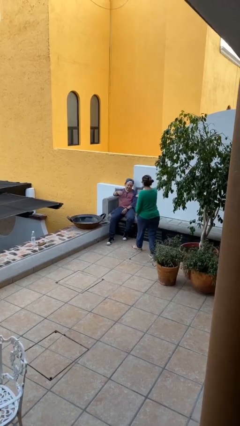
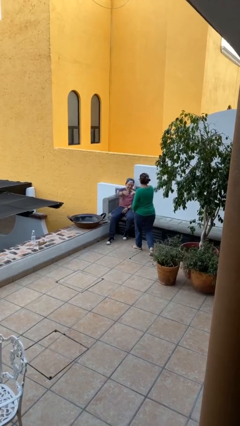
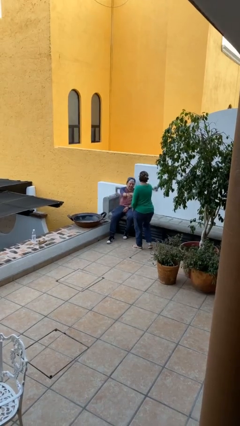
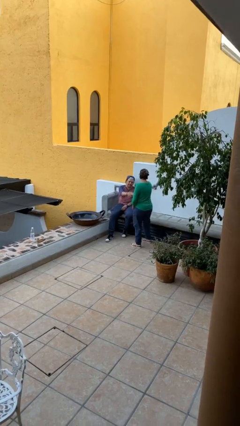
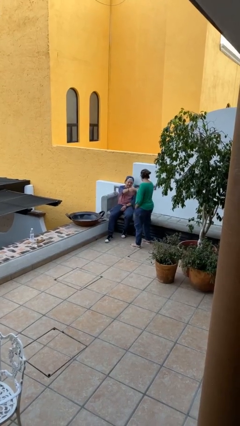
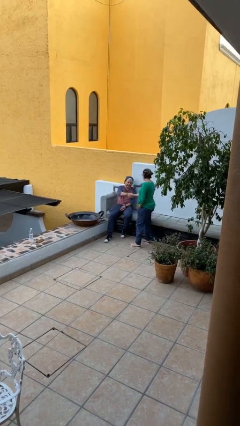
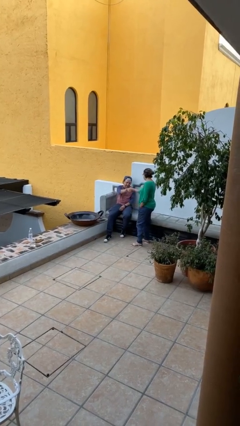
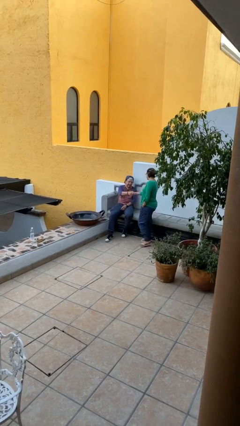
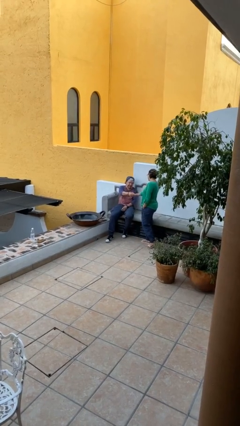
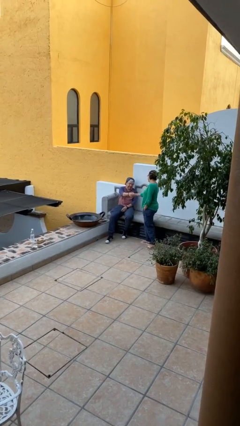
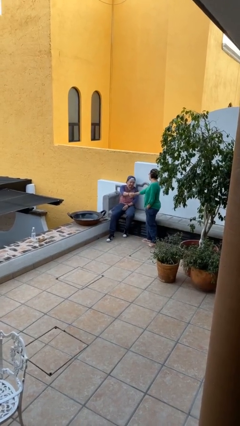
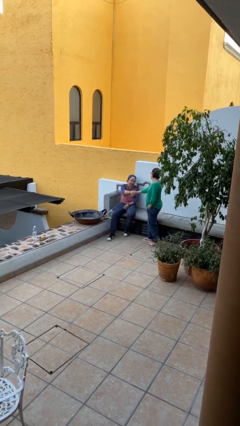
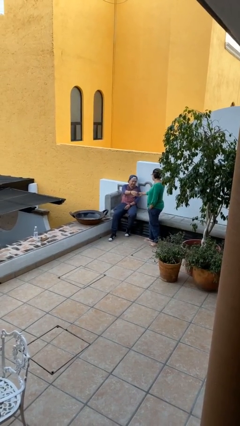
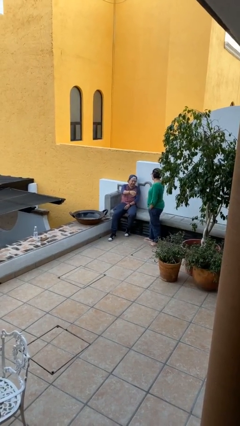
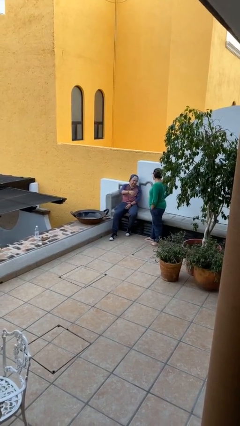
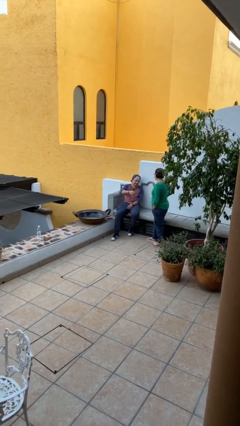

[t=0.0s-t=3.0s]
person shakes hand

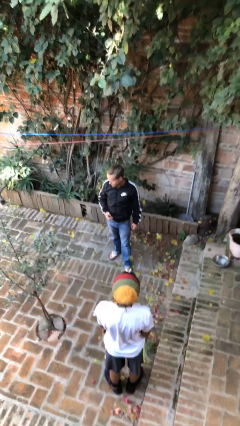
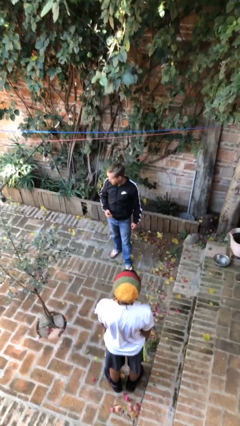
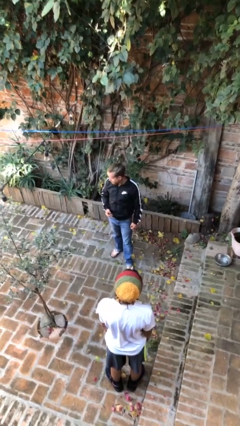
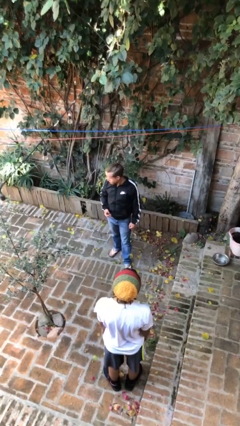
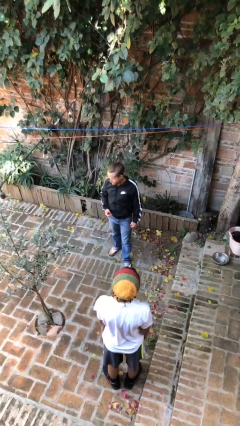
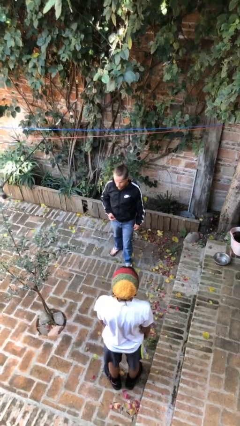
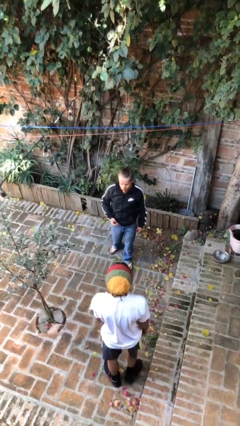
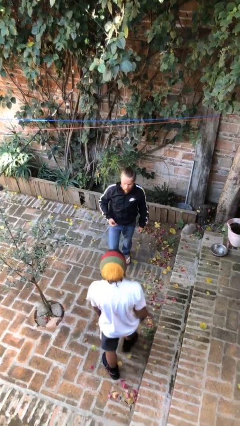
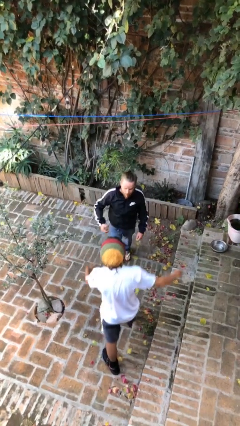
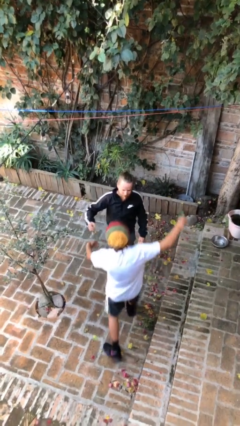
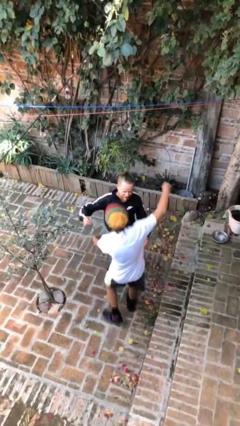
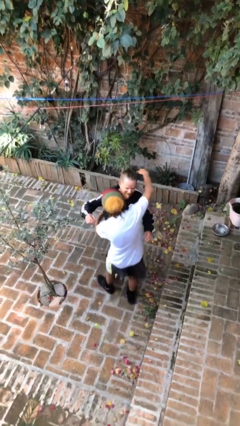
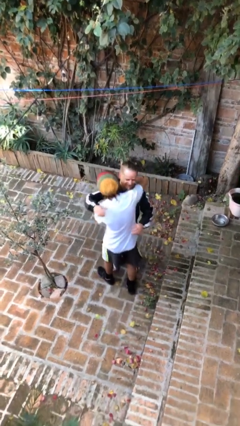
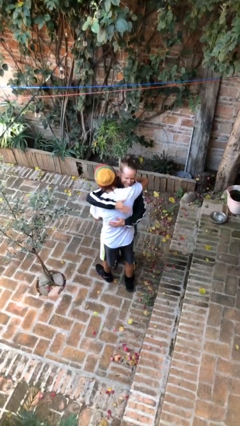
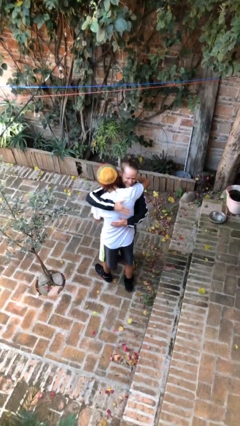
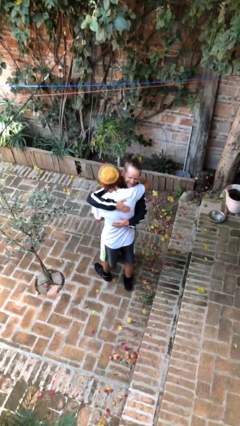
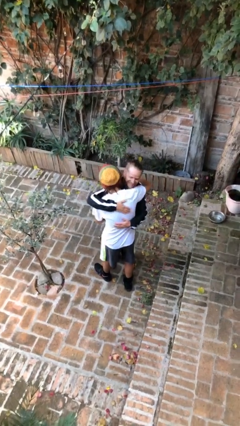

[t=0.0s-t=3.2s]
person embraces person

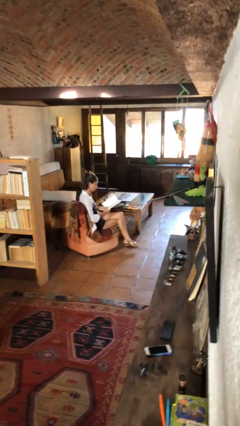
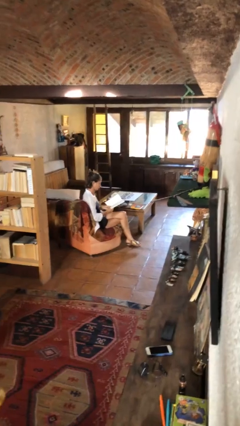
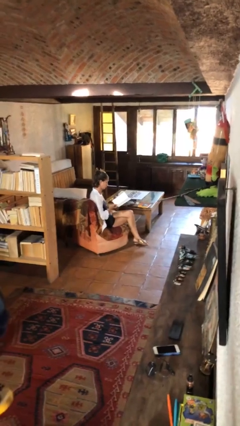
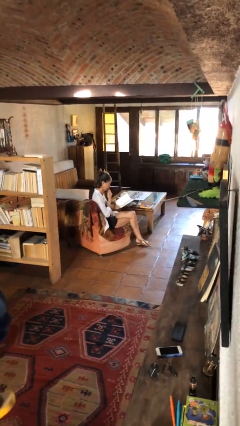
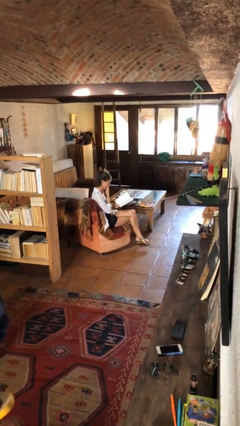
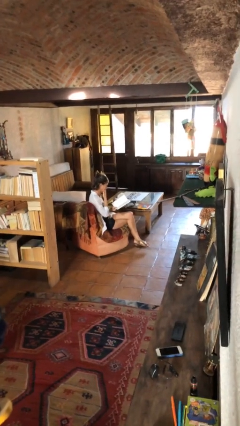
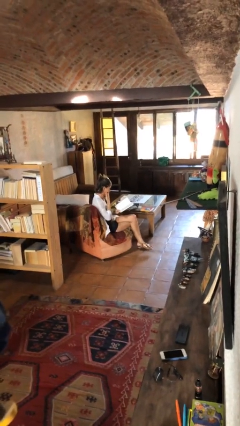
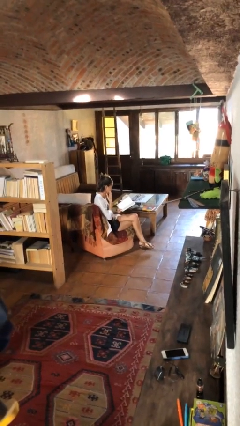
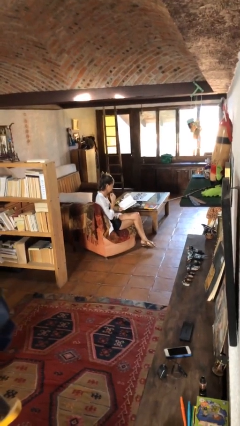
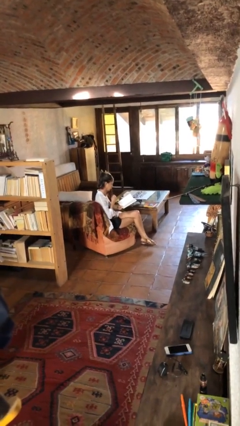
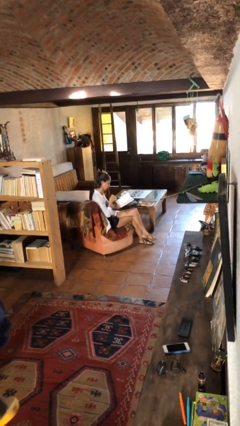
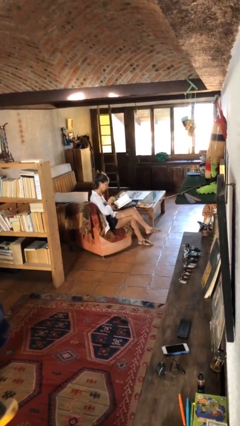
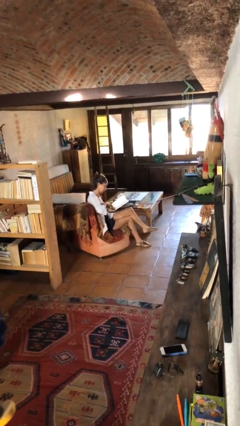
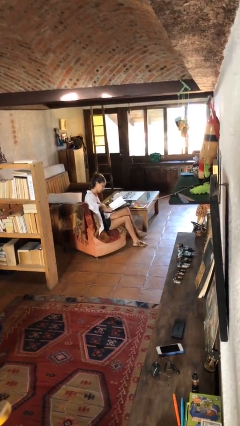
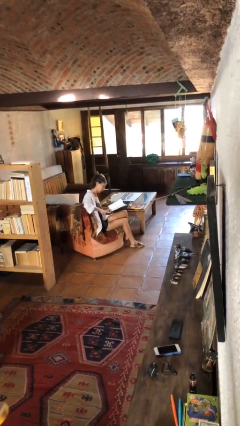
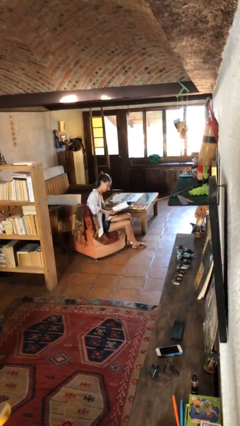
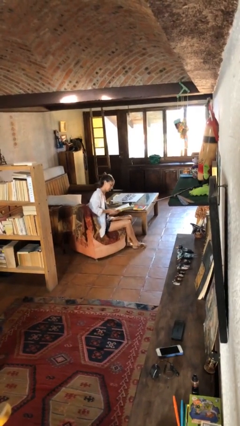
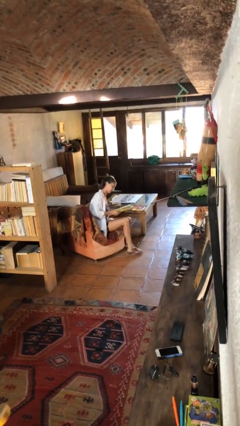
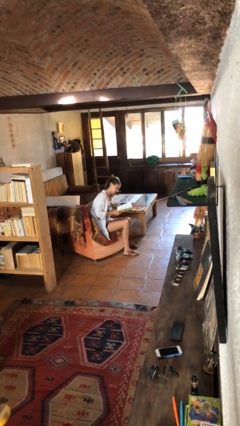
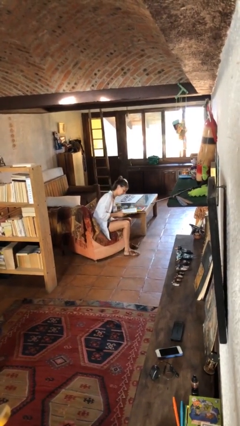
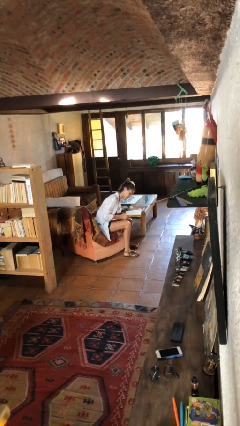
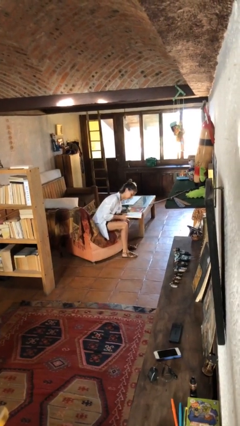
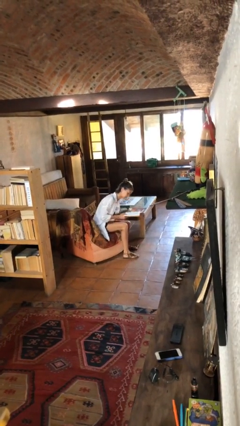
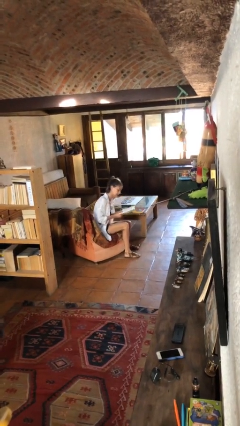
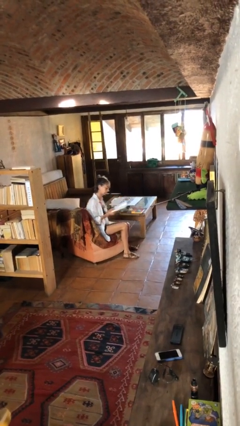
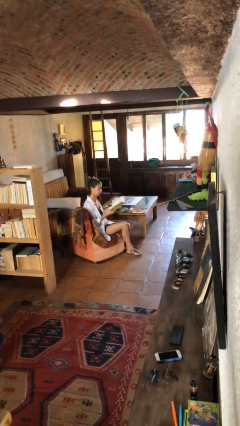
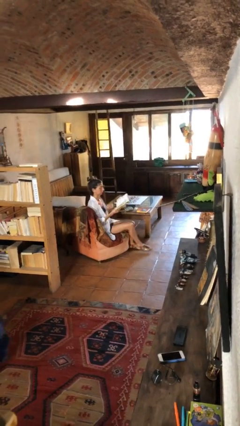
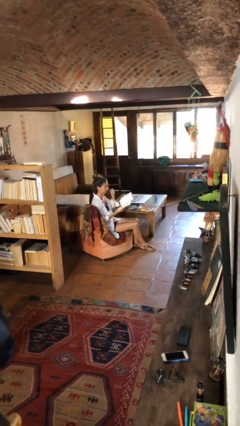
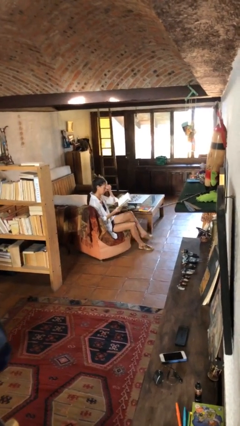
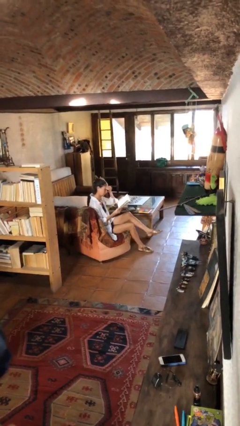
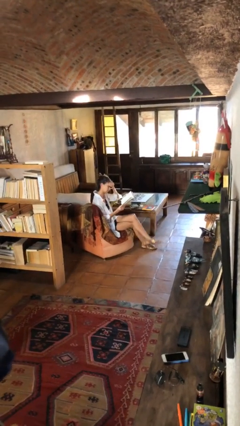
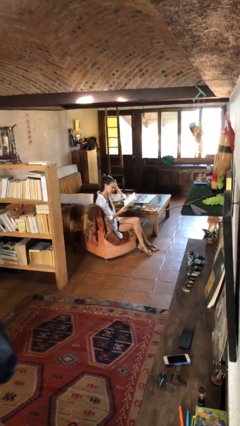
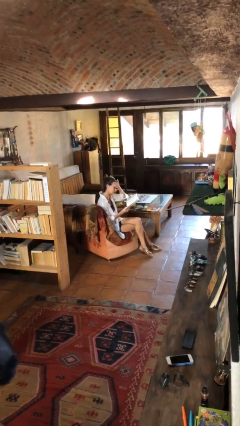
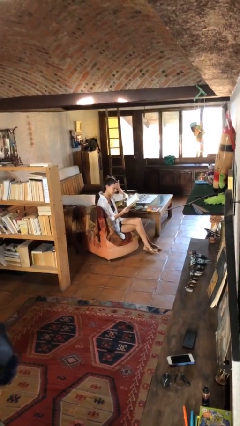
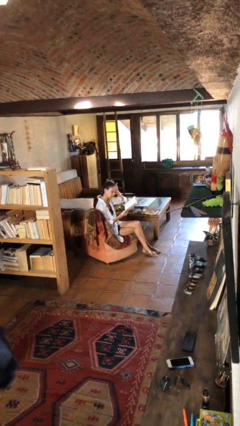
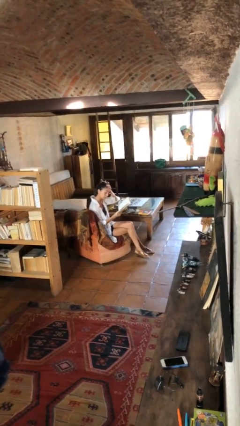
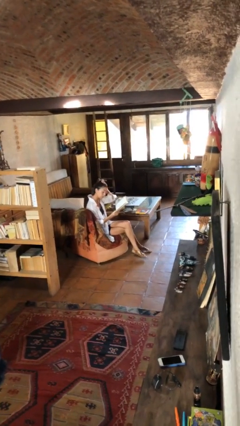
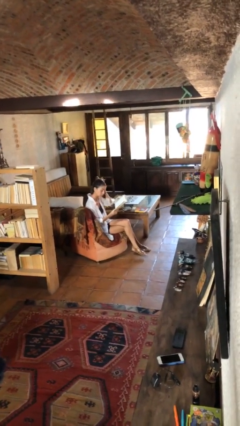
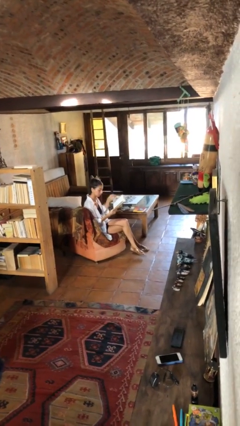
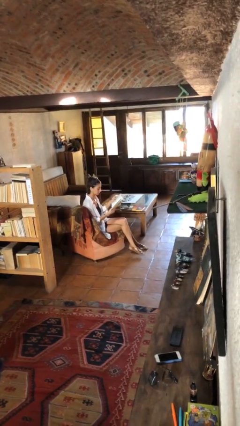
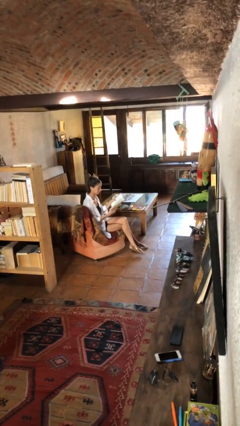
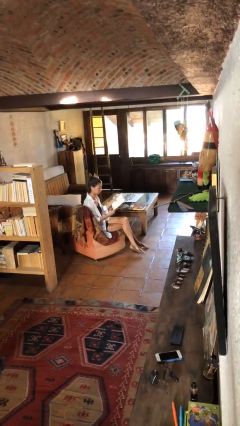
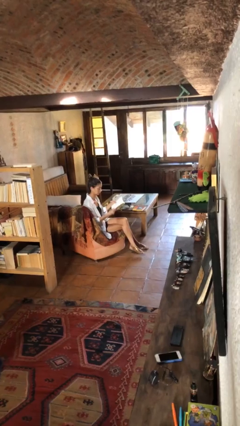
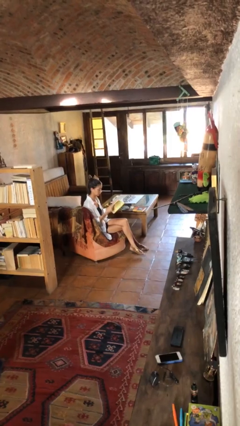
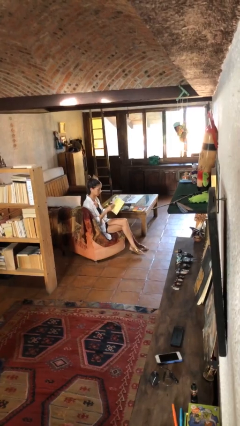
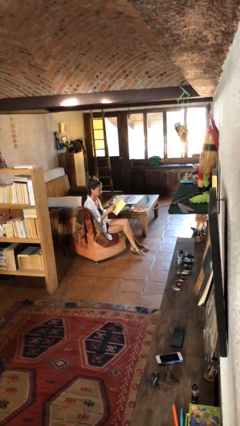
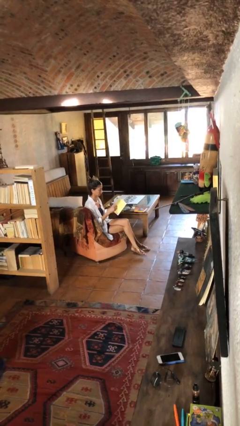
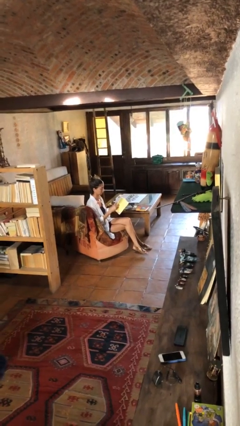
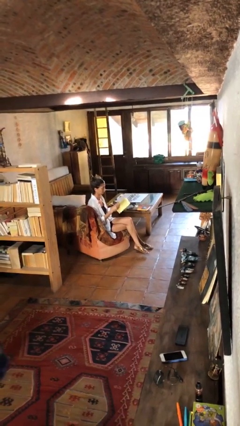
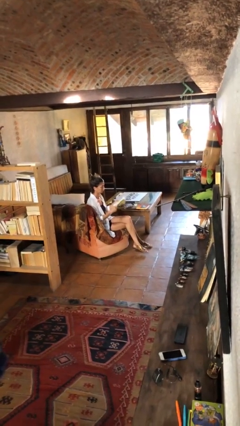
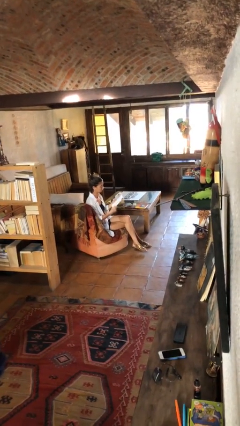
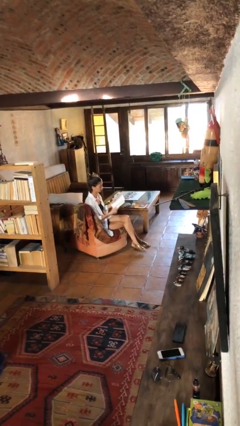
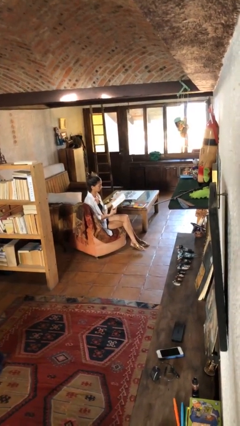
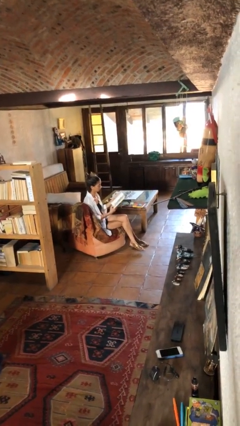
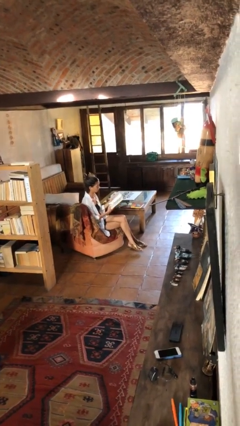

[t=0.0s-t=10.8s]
person reads document

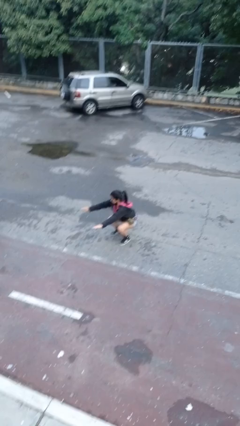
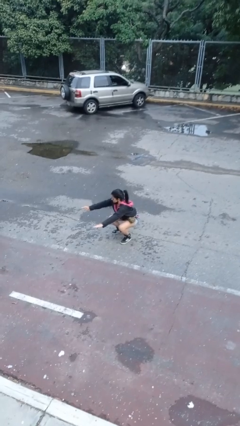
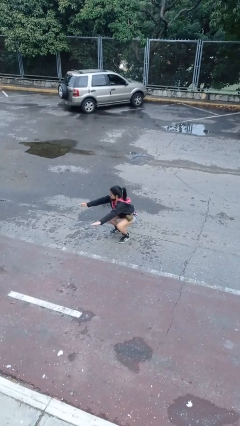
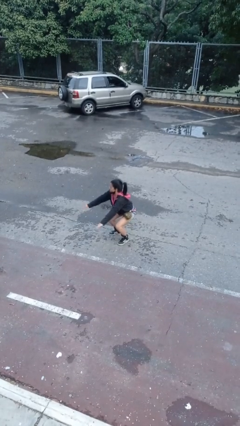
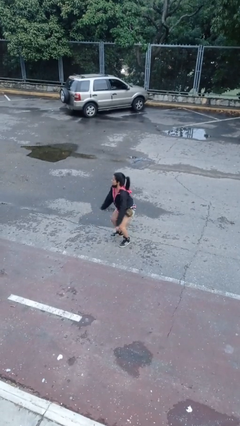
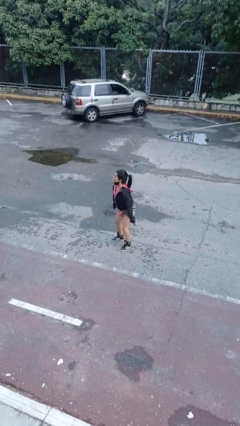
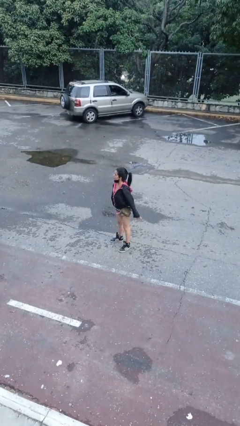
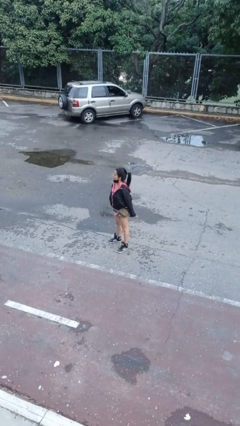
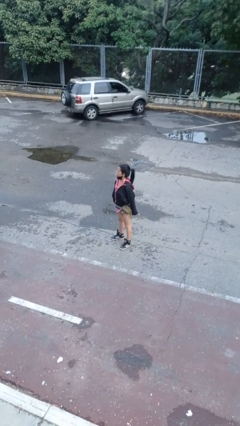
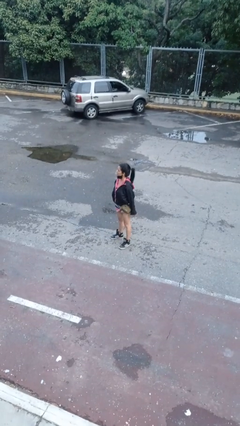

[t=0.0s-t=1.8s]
person stands up
